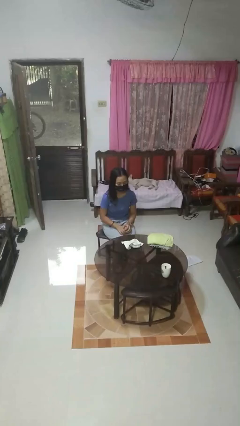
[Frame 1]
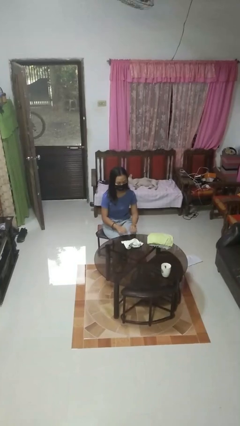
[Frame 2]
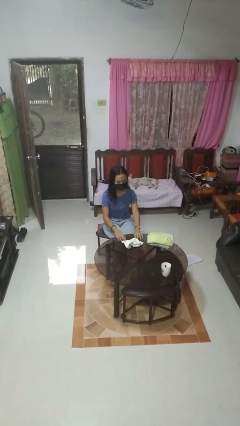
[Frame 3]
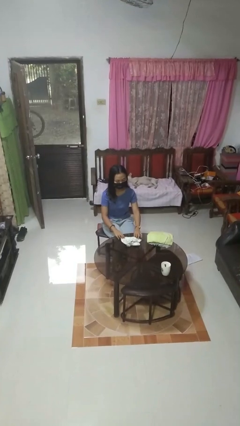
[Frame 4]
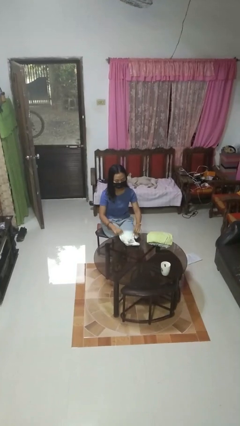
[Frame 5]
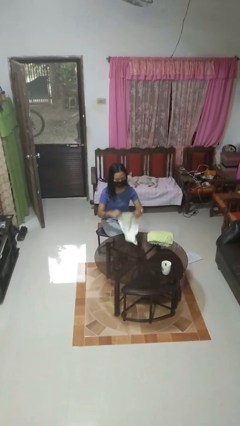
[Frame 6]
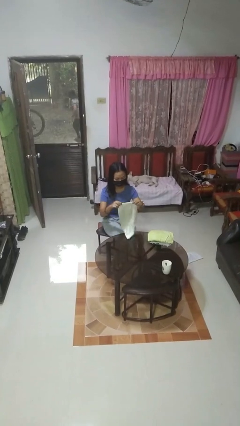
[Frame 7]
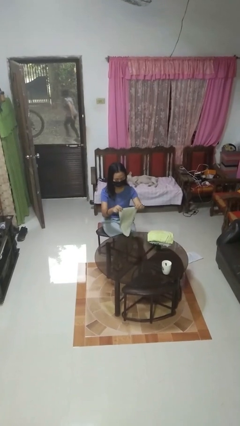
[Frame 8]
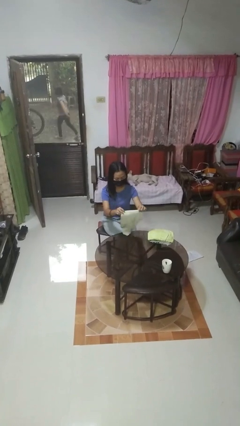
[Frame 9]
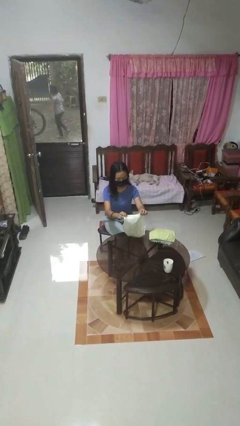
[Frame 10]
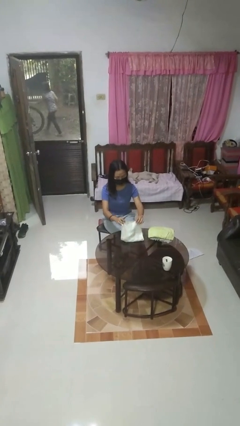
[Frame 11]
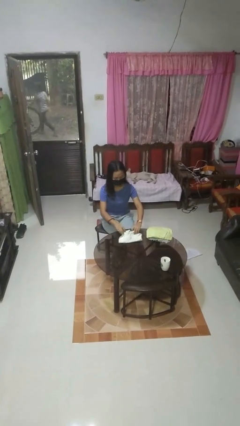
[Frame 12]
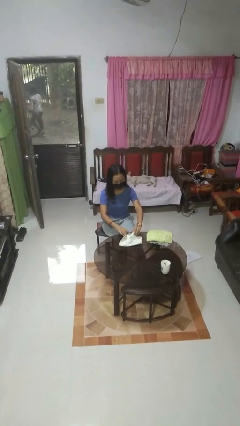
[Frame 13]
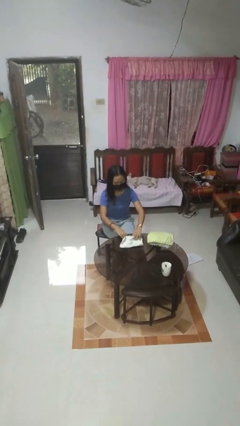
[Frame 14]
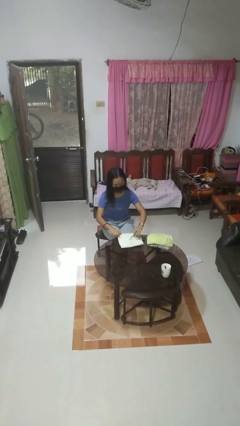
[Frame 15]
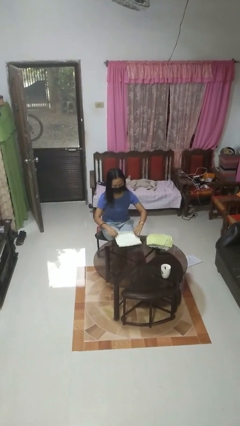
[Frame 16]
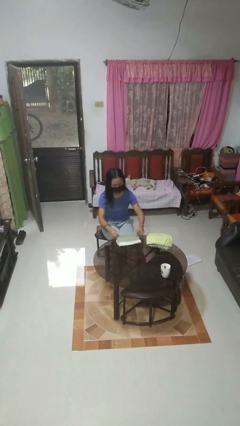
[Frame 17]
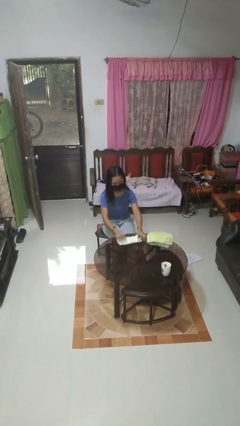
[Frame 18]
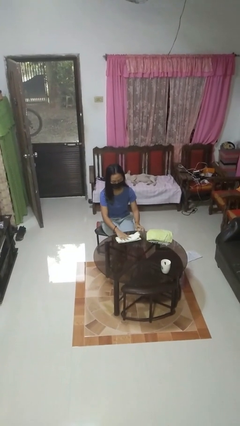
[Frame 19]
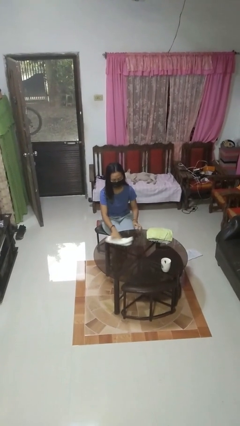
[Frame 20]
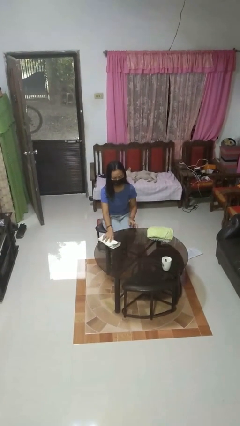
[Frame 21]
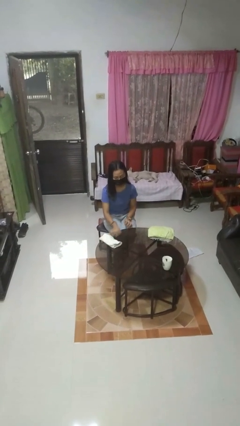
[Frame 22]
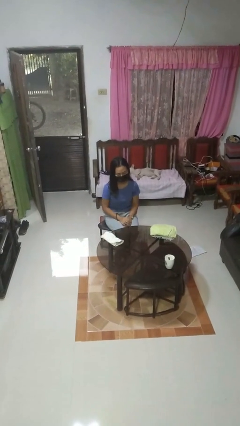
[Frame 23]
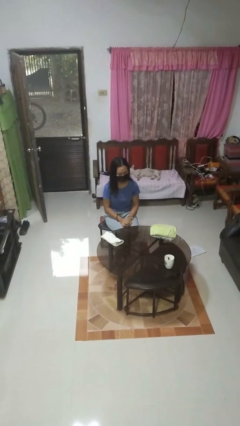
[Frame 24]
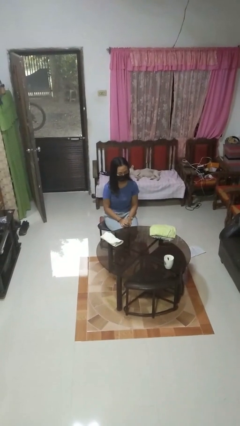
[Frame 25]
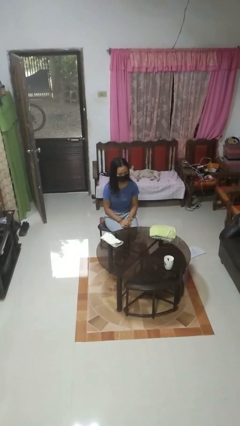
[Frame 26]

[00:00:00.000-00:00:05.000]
person folds towel

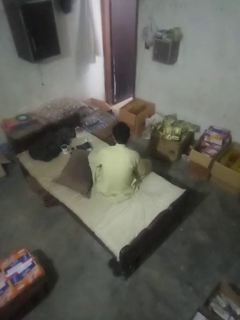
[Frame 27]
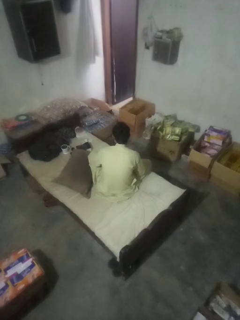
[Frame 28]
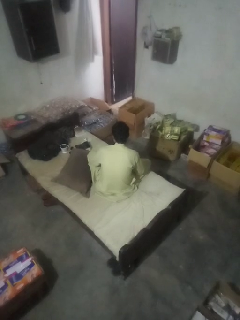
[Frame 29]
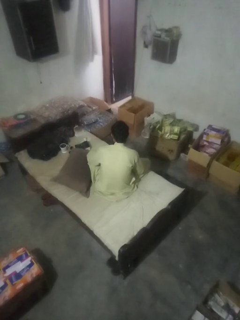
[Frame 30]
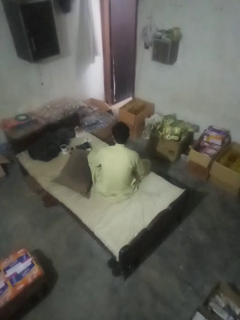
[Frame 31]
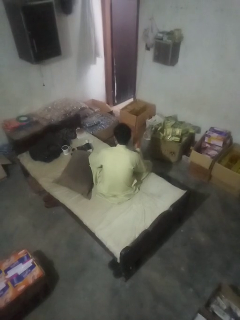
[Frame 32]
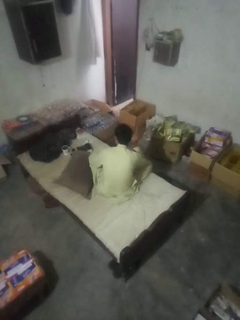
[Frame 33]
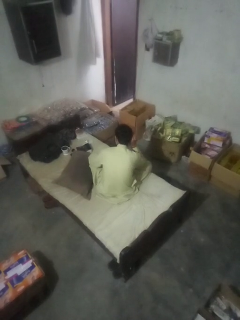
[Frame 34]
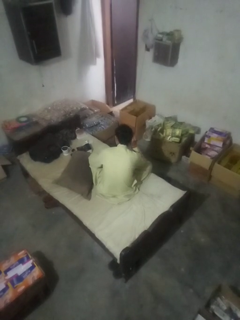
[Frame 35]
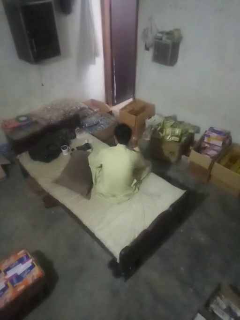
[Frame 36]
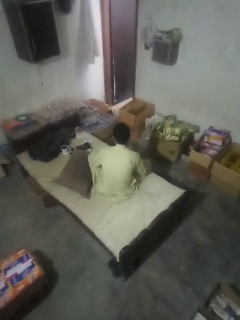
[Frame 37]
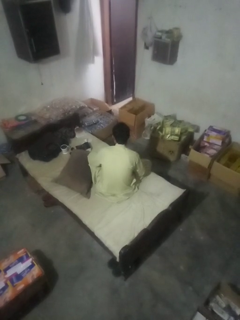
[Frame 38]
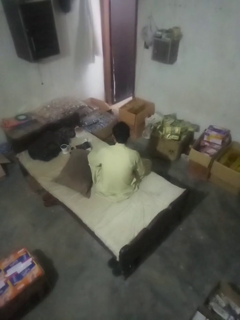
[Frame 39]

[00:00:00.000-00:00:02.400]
person gestures listen closely

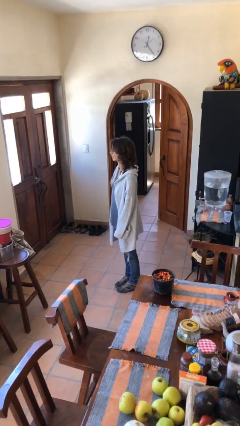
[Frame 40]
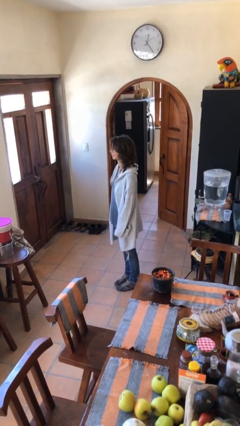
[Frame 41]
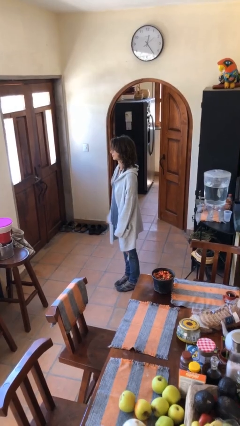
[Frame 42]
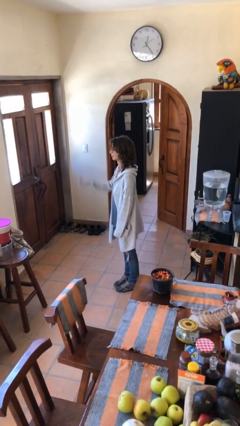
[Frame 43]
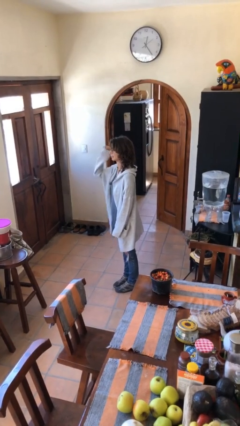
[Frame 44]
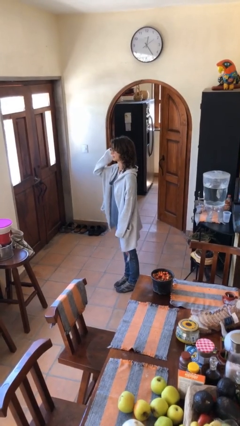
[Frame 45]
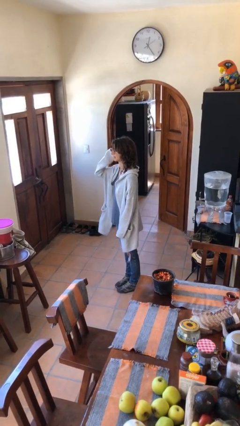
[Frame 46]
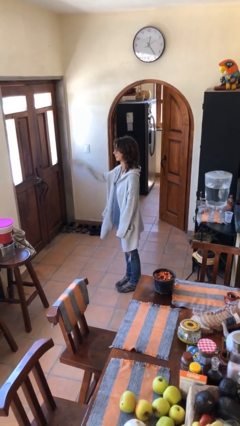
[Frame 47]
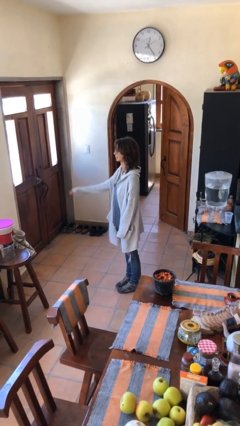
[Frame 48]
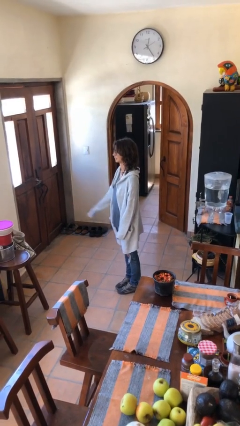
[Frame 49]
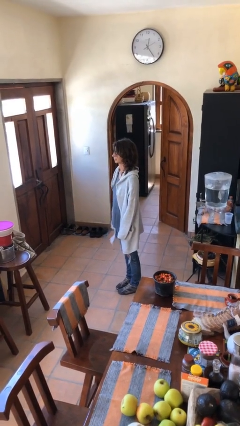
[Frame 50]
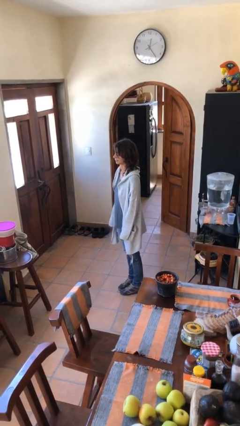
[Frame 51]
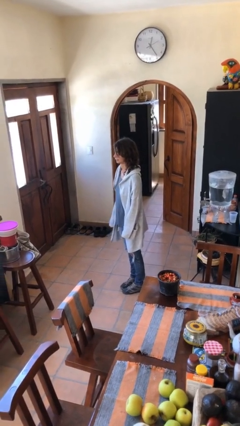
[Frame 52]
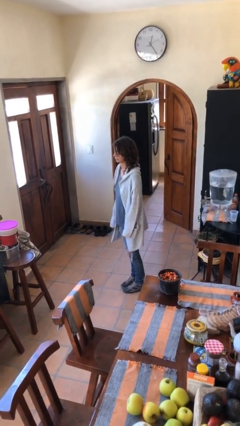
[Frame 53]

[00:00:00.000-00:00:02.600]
person salutes

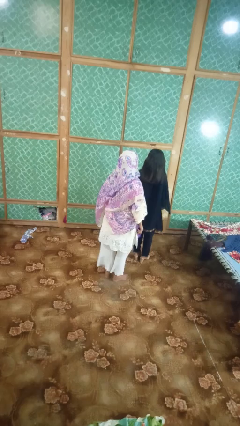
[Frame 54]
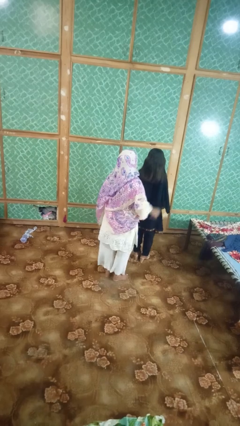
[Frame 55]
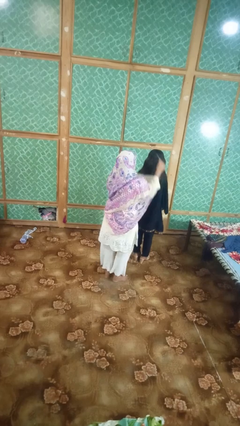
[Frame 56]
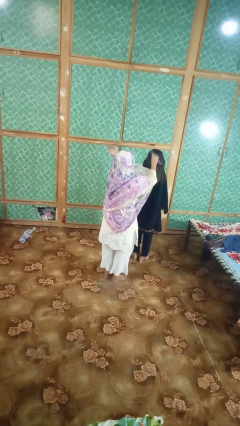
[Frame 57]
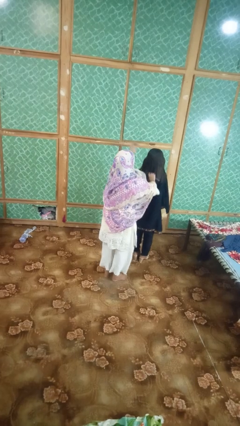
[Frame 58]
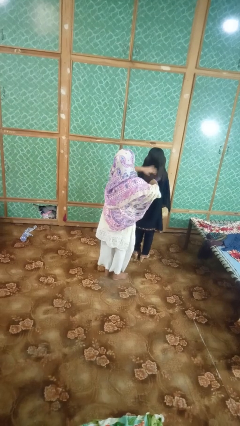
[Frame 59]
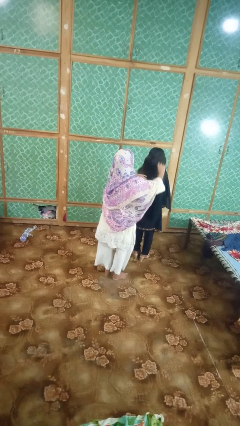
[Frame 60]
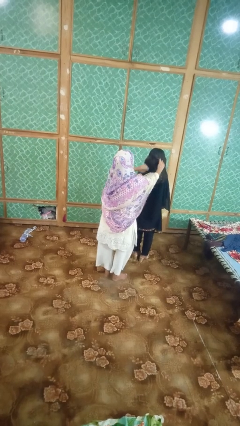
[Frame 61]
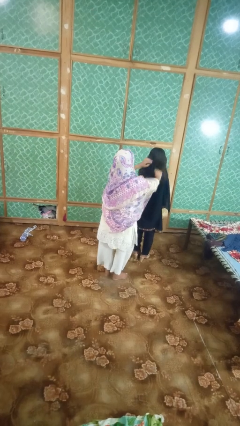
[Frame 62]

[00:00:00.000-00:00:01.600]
person brushes hair of person

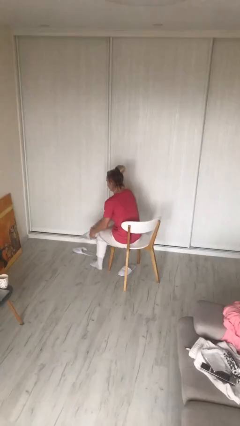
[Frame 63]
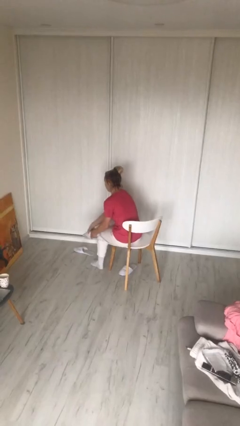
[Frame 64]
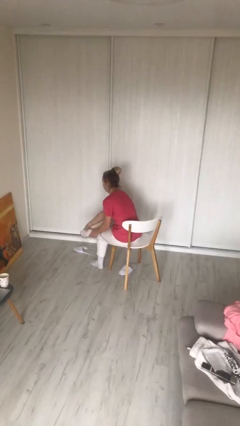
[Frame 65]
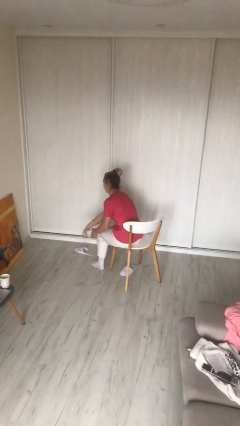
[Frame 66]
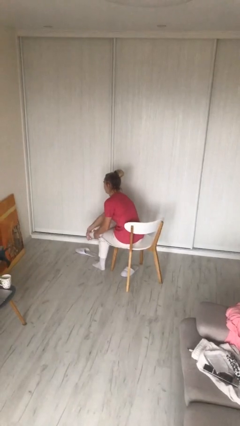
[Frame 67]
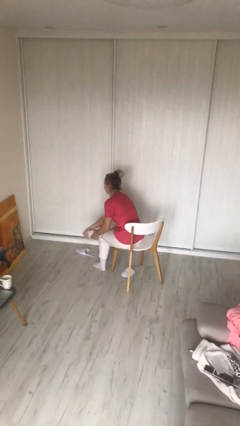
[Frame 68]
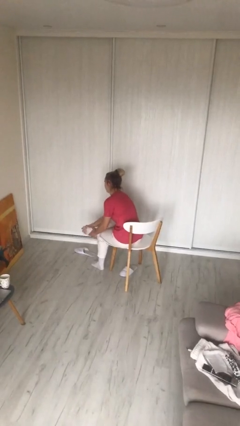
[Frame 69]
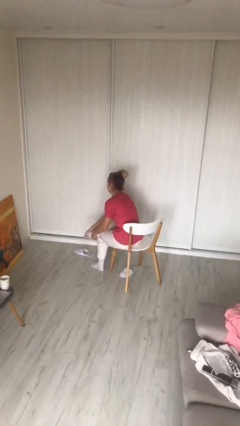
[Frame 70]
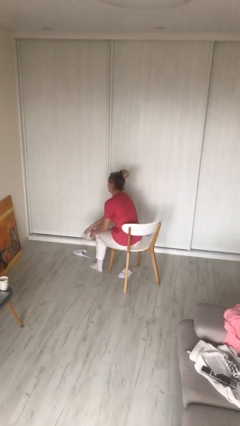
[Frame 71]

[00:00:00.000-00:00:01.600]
person rubs foot

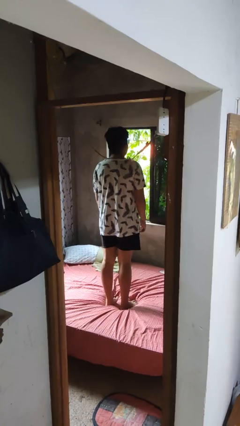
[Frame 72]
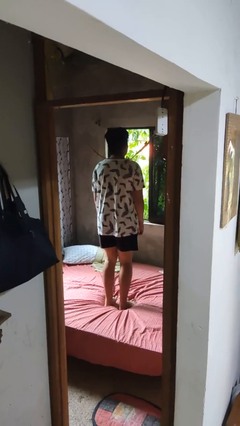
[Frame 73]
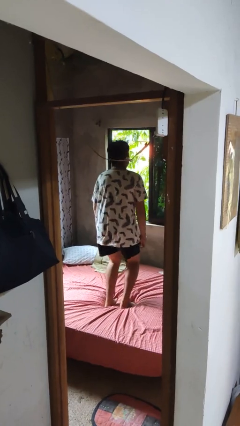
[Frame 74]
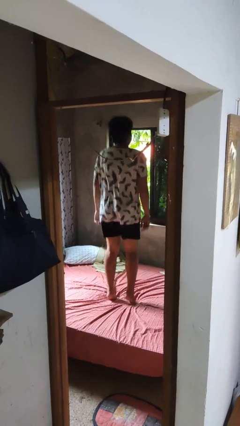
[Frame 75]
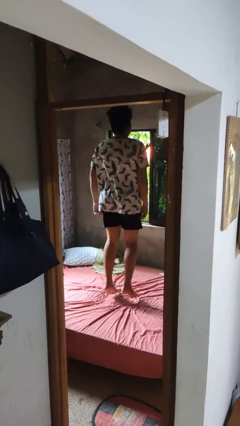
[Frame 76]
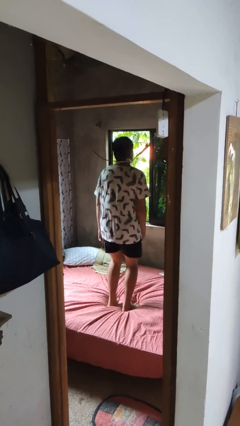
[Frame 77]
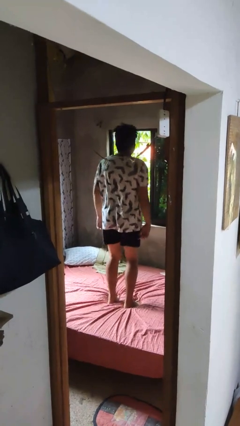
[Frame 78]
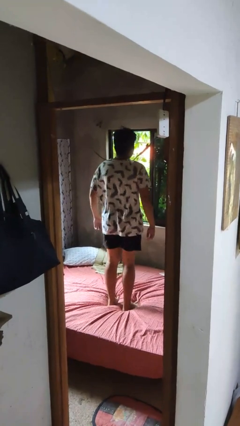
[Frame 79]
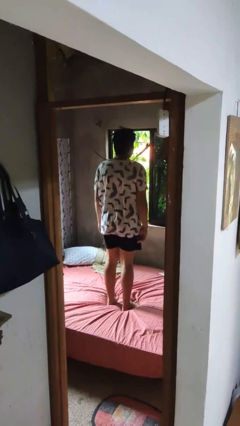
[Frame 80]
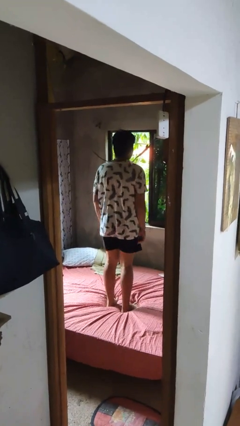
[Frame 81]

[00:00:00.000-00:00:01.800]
person jumps on bed

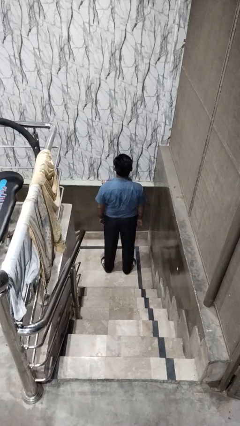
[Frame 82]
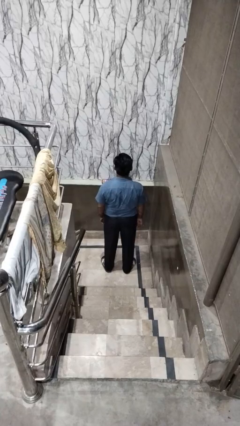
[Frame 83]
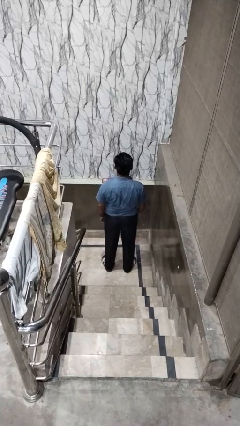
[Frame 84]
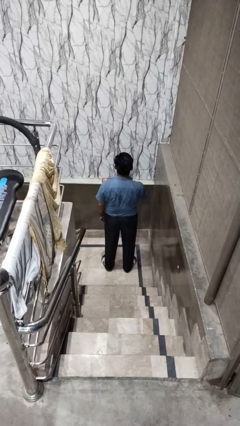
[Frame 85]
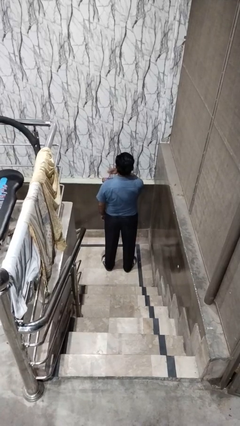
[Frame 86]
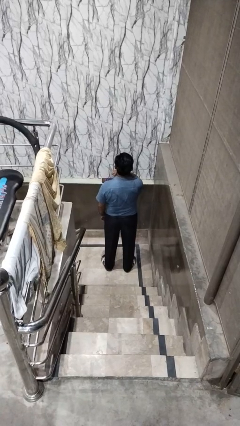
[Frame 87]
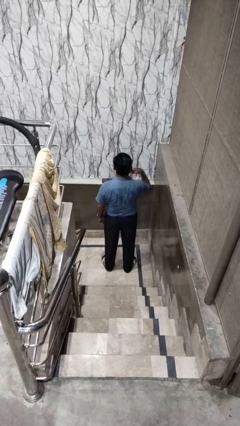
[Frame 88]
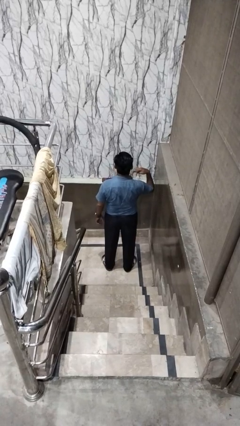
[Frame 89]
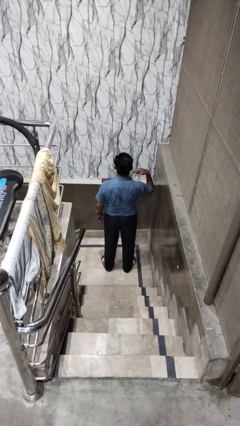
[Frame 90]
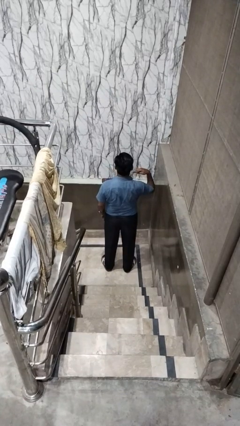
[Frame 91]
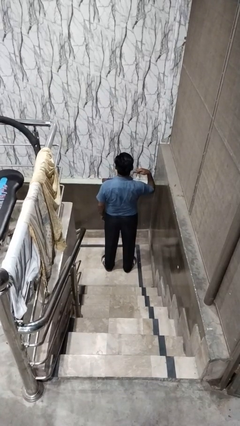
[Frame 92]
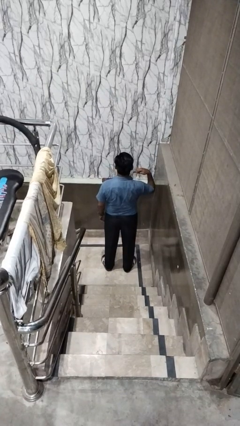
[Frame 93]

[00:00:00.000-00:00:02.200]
person gestures cut

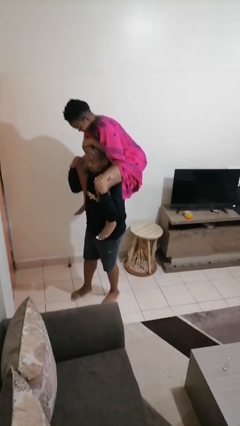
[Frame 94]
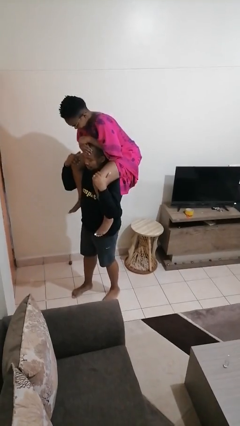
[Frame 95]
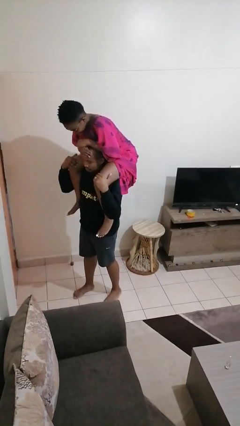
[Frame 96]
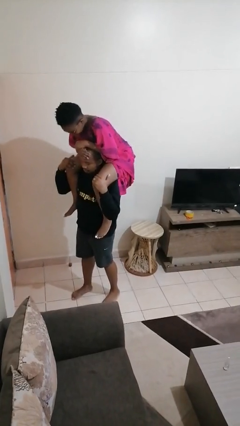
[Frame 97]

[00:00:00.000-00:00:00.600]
person carries person on shoulders
